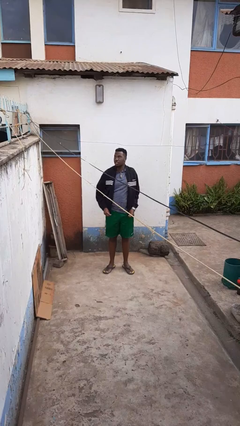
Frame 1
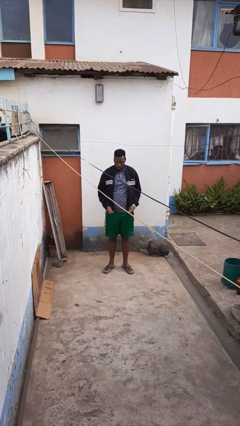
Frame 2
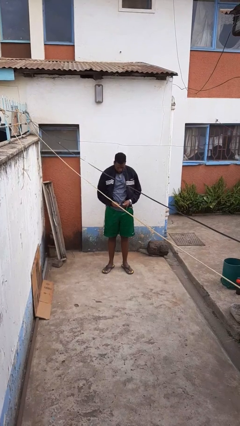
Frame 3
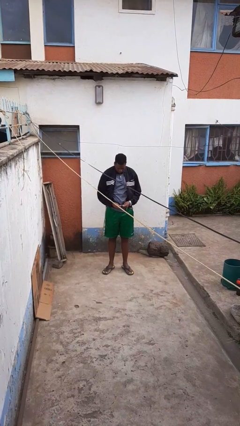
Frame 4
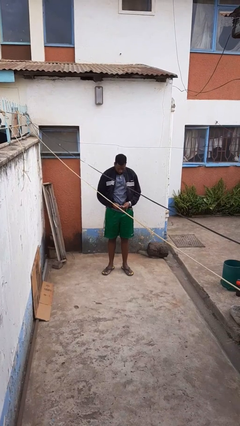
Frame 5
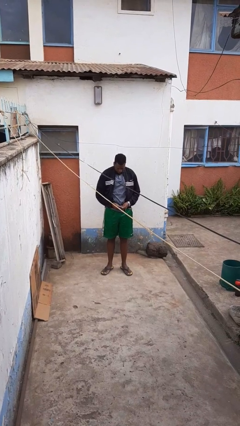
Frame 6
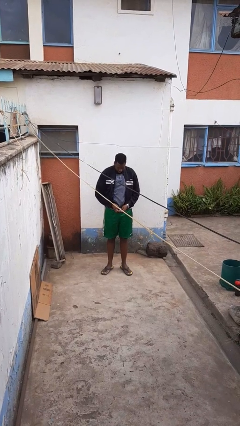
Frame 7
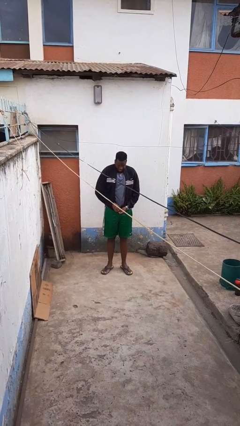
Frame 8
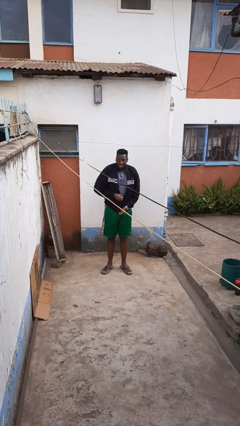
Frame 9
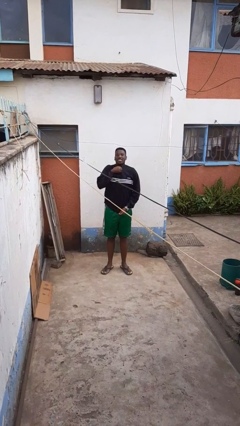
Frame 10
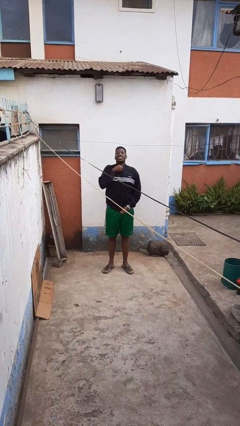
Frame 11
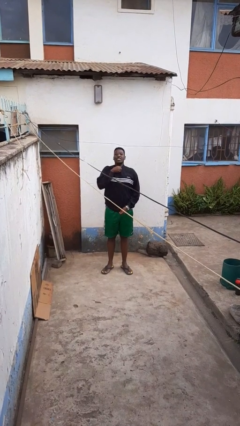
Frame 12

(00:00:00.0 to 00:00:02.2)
person zips up jacket

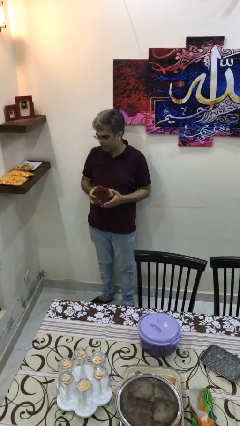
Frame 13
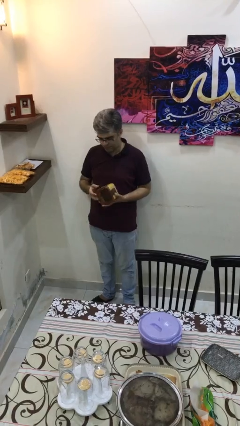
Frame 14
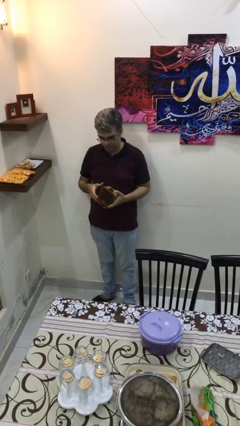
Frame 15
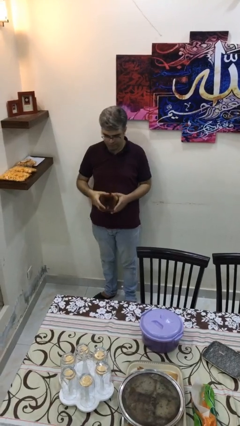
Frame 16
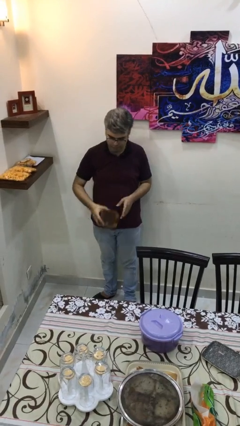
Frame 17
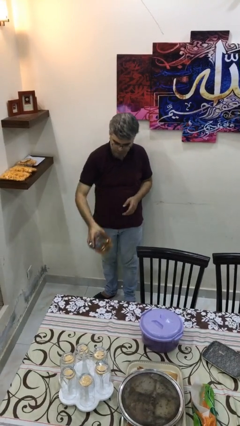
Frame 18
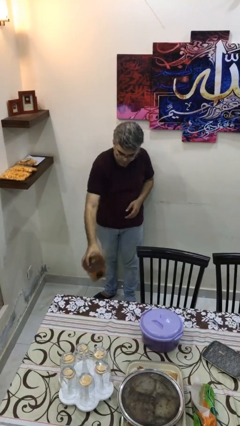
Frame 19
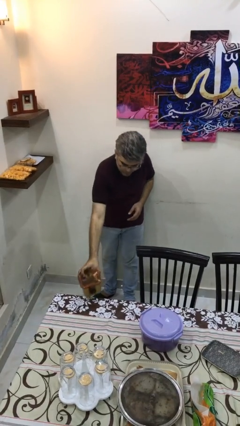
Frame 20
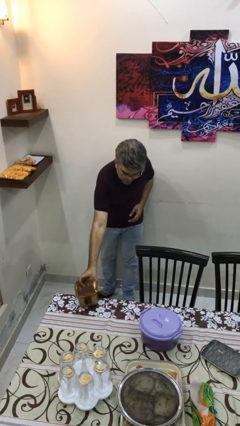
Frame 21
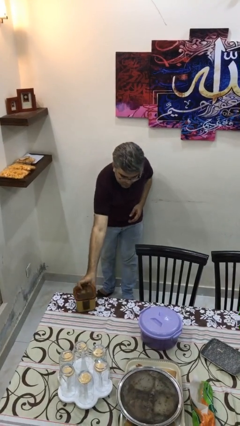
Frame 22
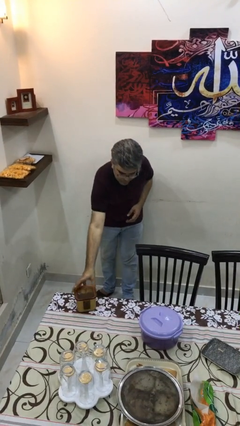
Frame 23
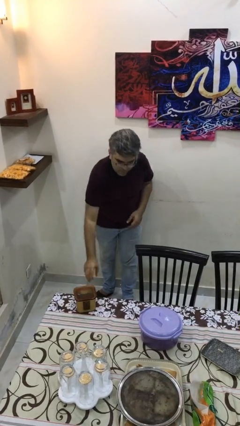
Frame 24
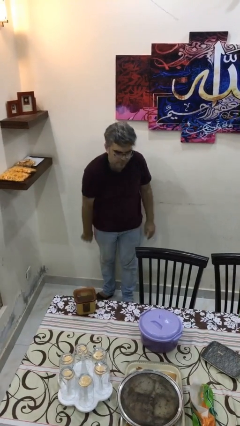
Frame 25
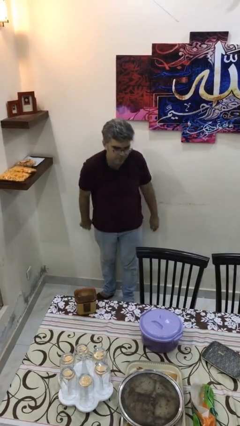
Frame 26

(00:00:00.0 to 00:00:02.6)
person puts down object on table

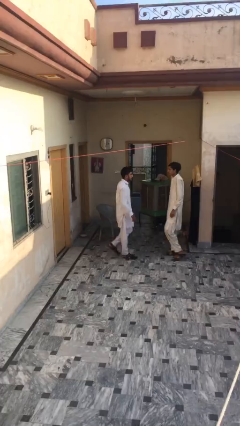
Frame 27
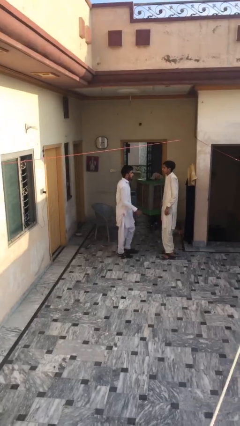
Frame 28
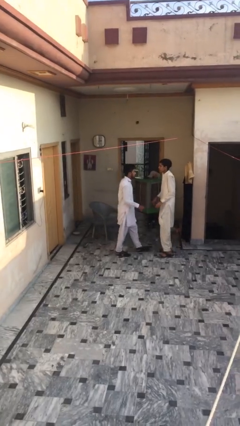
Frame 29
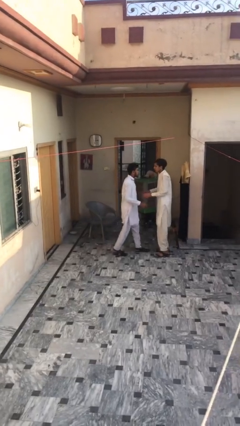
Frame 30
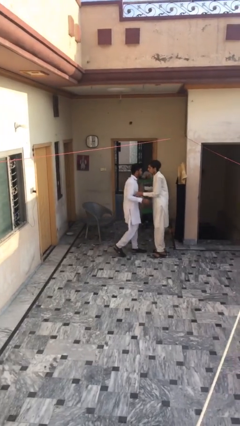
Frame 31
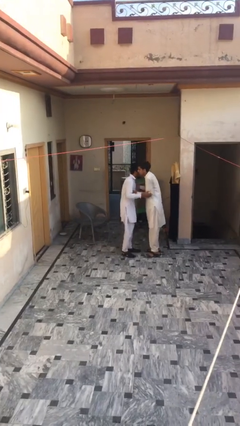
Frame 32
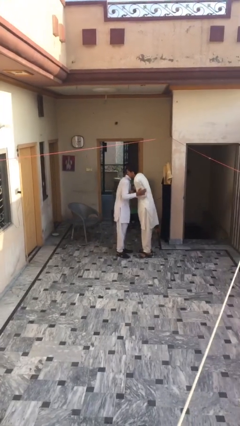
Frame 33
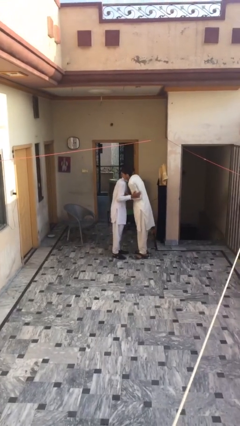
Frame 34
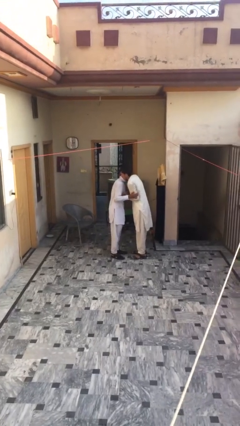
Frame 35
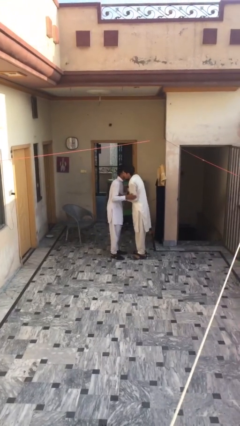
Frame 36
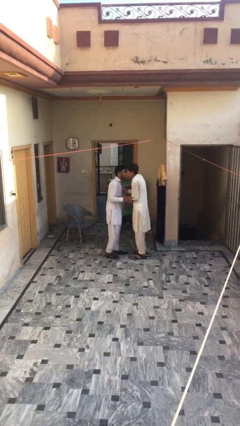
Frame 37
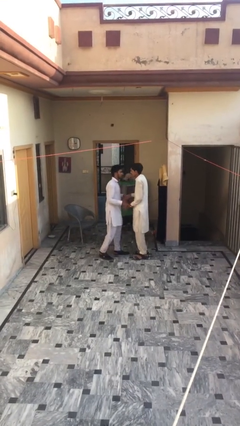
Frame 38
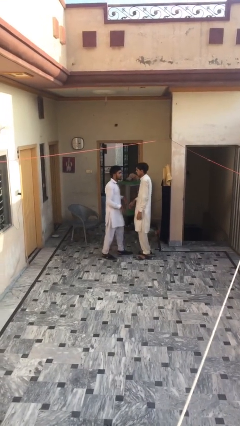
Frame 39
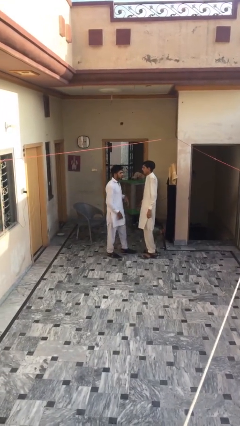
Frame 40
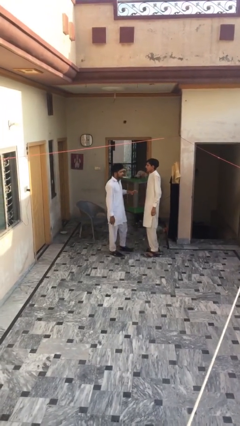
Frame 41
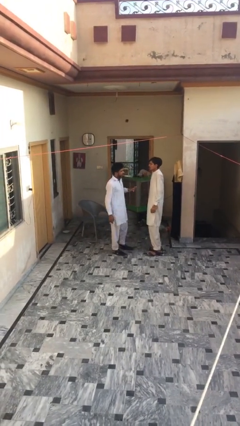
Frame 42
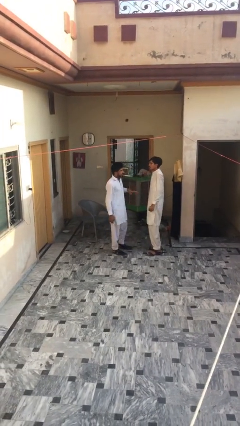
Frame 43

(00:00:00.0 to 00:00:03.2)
person embraces person

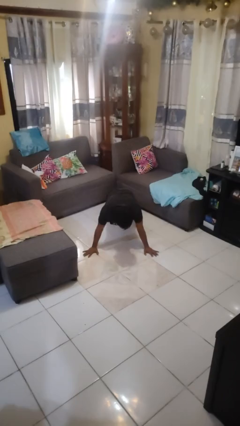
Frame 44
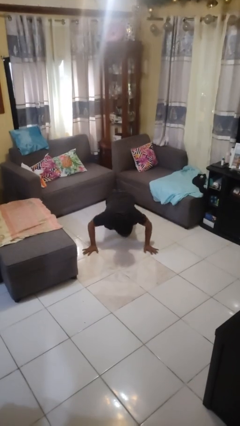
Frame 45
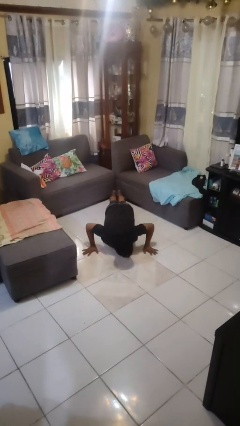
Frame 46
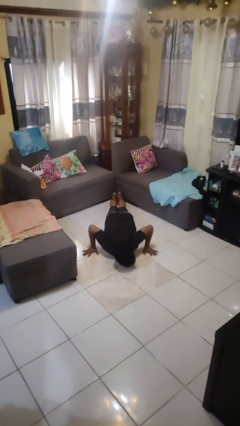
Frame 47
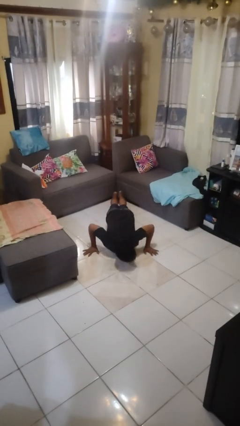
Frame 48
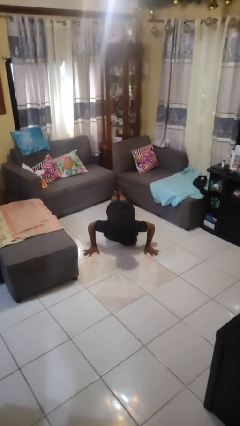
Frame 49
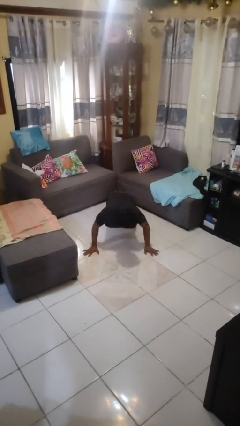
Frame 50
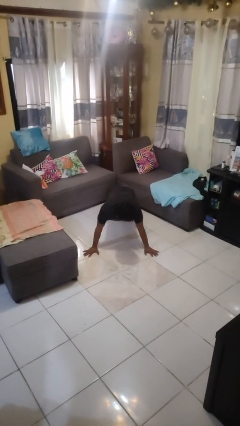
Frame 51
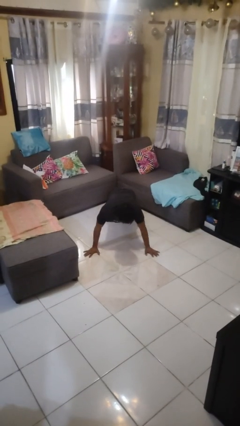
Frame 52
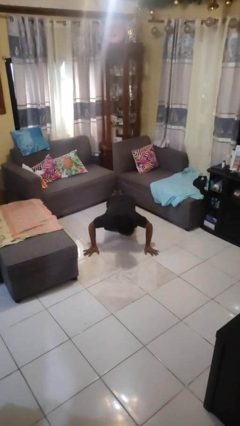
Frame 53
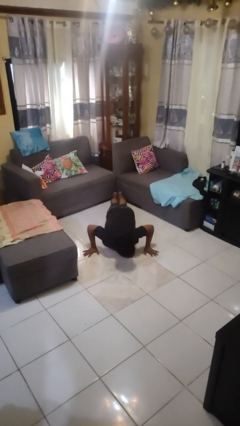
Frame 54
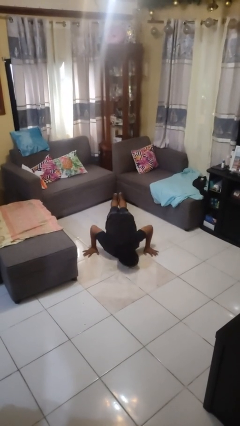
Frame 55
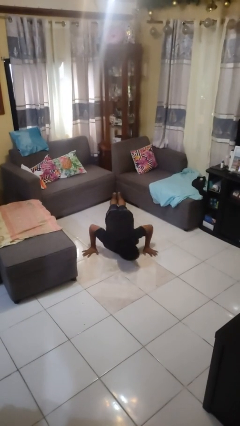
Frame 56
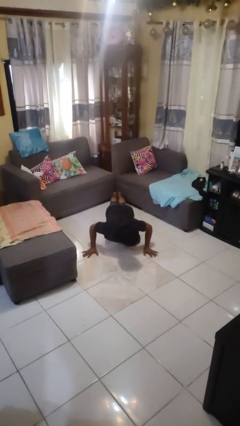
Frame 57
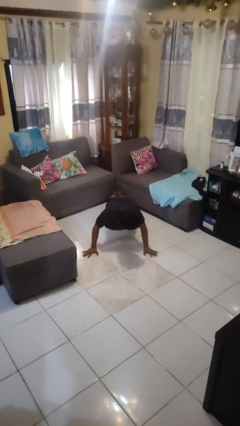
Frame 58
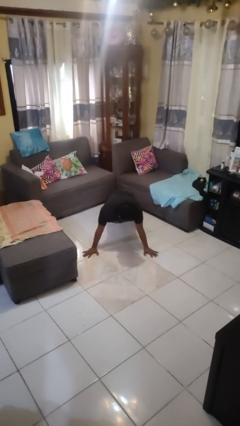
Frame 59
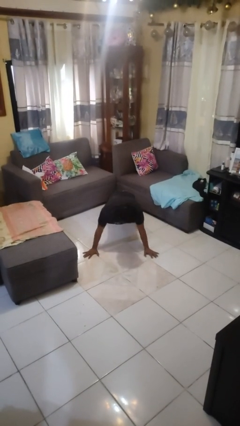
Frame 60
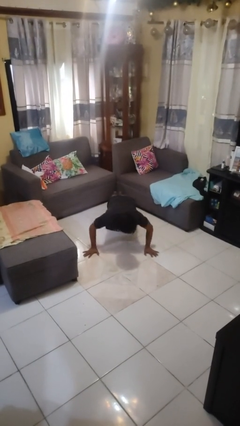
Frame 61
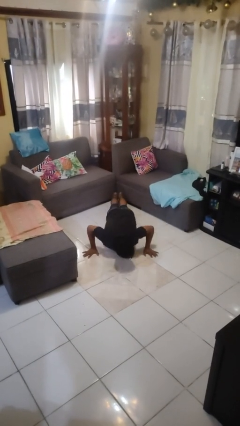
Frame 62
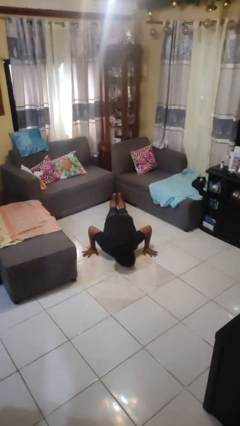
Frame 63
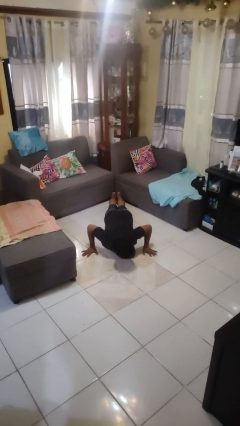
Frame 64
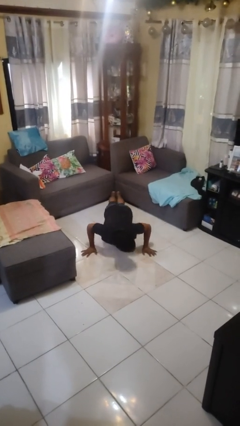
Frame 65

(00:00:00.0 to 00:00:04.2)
person exercises with pushup

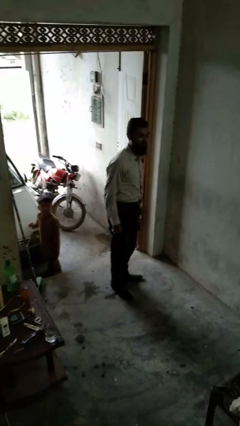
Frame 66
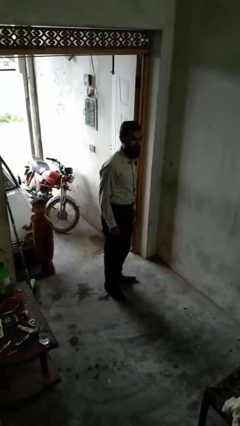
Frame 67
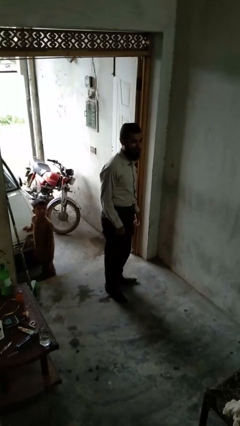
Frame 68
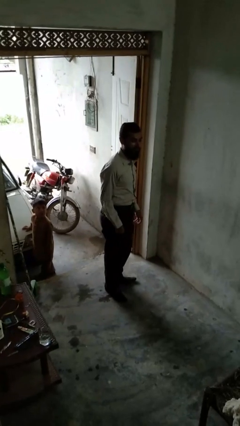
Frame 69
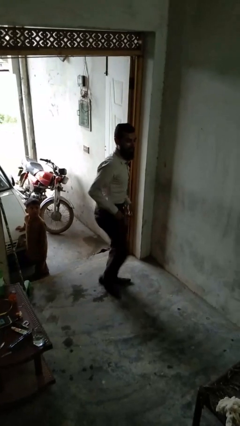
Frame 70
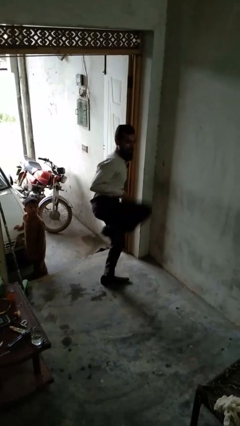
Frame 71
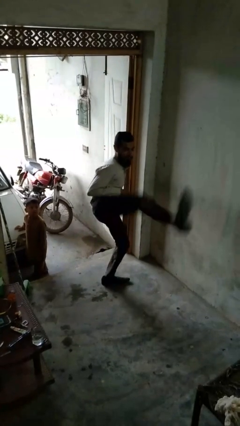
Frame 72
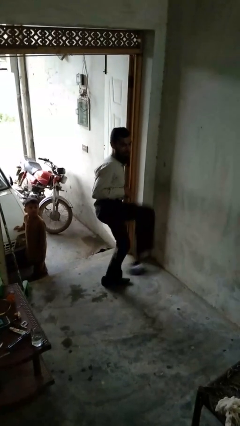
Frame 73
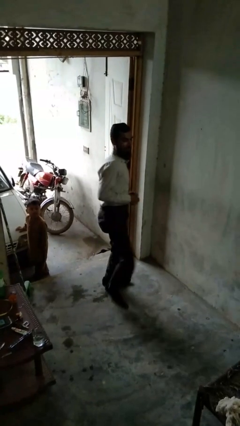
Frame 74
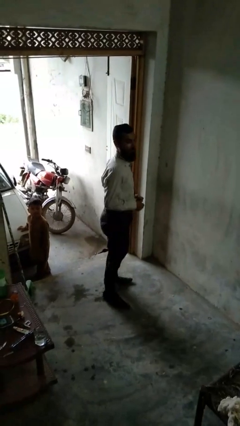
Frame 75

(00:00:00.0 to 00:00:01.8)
person karate kicks

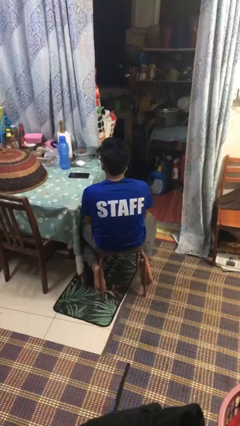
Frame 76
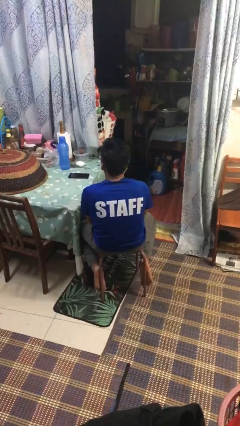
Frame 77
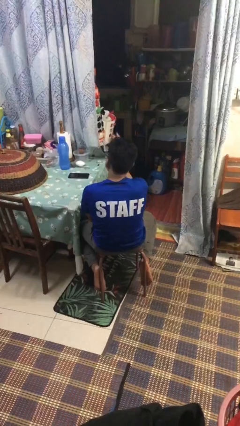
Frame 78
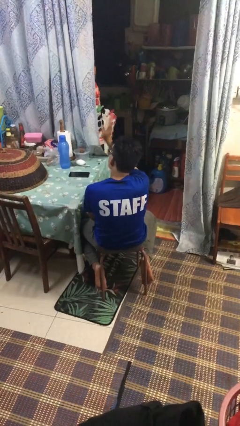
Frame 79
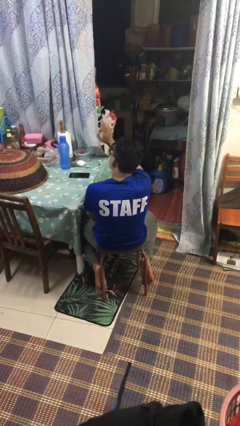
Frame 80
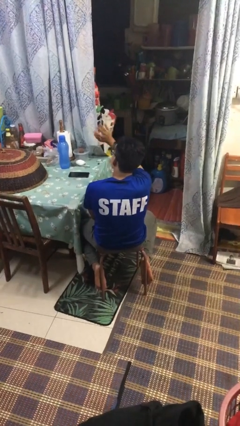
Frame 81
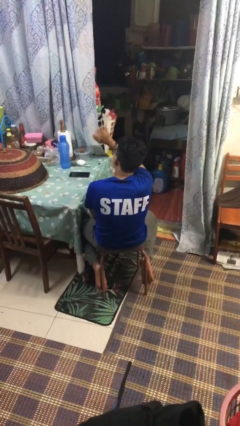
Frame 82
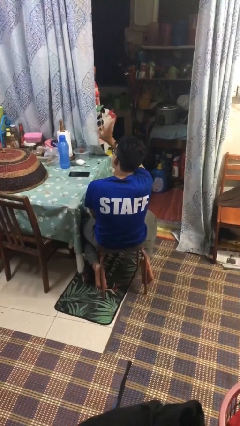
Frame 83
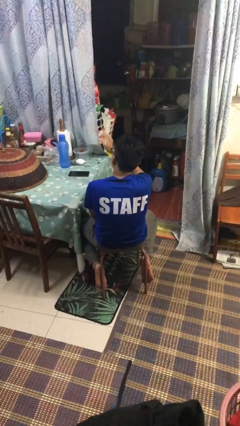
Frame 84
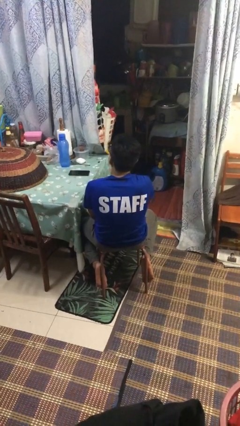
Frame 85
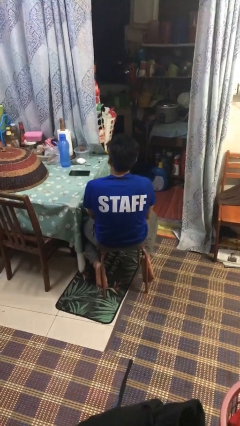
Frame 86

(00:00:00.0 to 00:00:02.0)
person waves at person

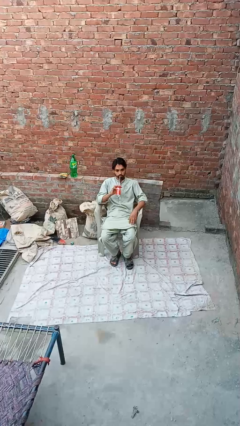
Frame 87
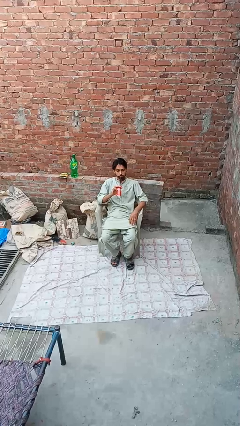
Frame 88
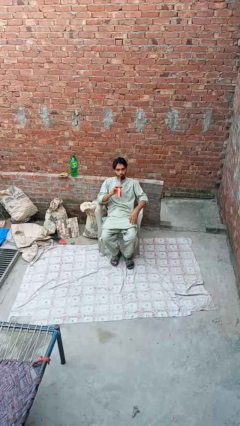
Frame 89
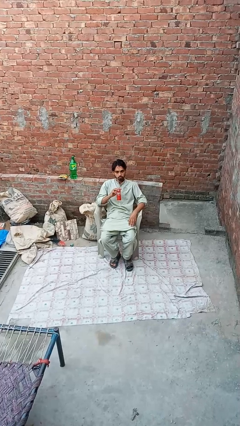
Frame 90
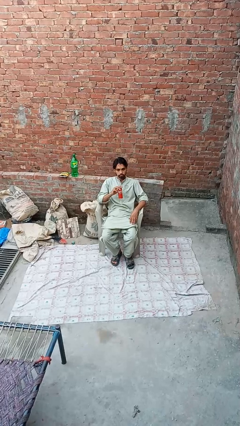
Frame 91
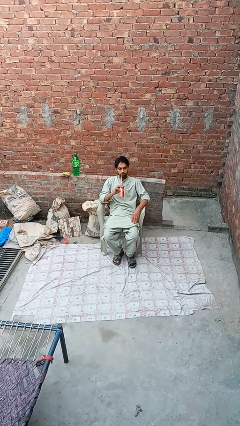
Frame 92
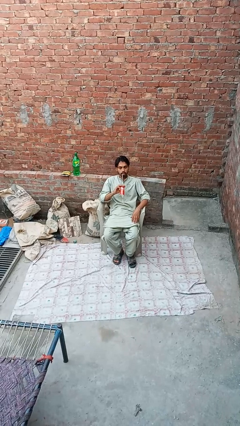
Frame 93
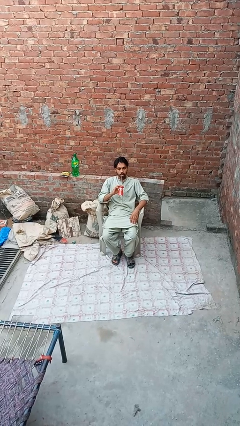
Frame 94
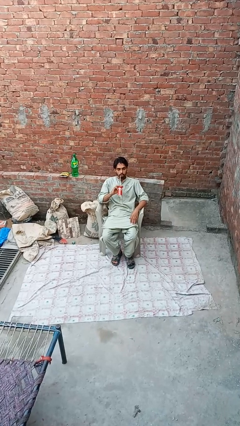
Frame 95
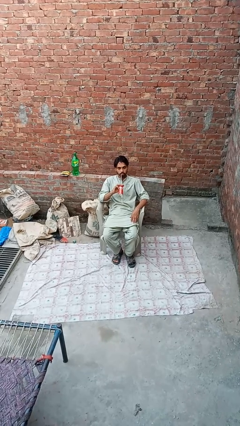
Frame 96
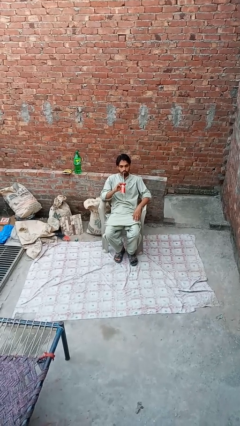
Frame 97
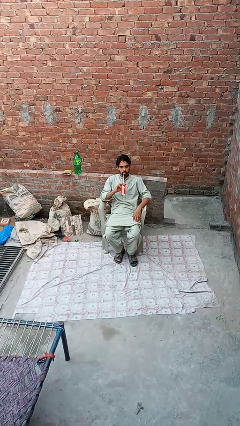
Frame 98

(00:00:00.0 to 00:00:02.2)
person drinks from straw
